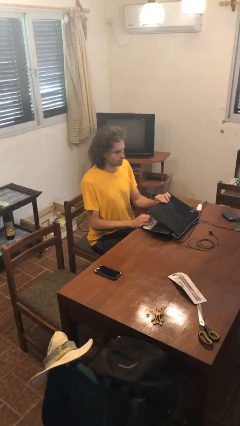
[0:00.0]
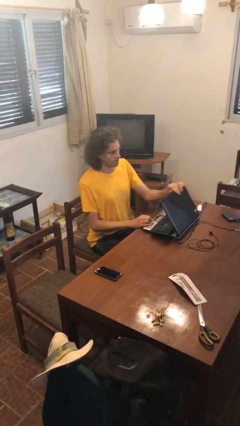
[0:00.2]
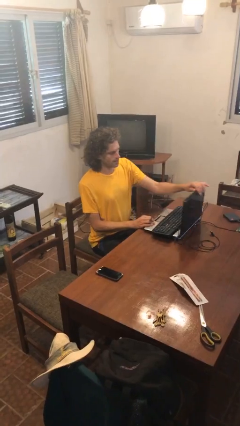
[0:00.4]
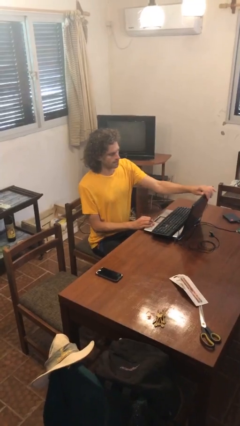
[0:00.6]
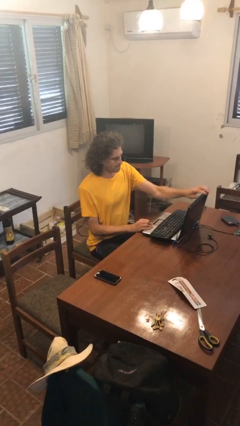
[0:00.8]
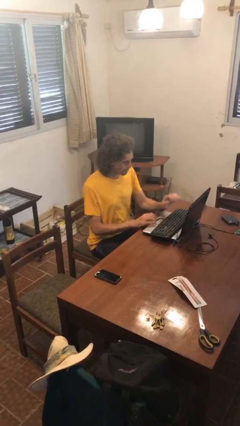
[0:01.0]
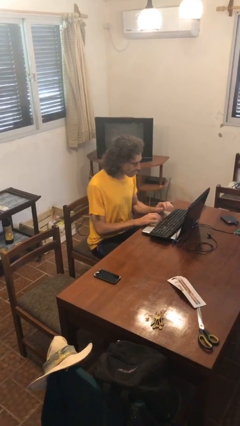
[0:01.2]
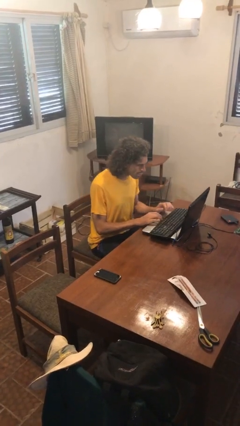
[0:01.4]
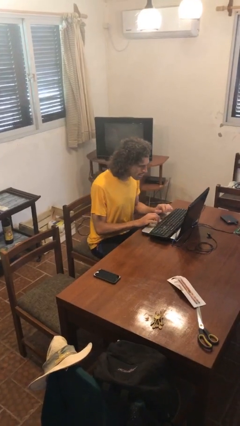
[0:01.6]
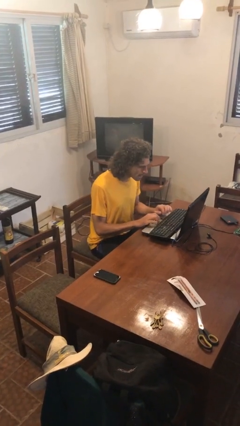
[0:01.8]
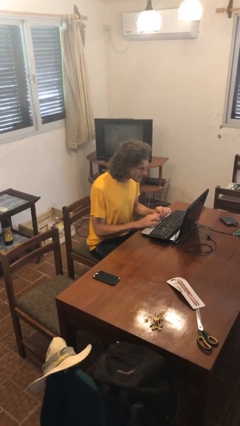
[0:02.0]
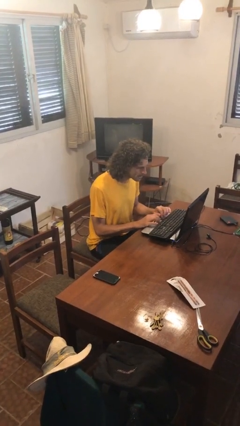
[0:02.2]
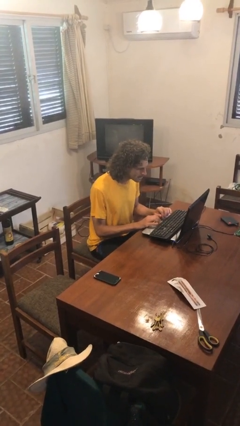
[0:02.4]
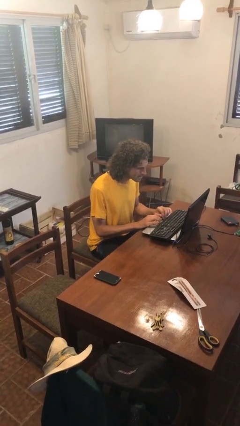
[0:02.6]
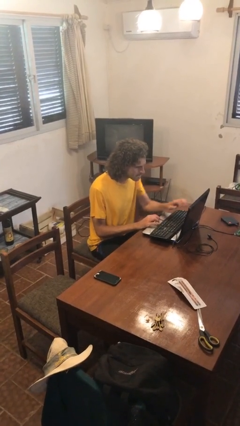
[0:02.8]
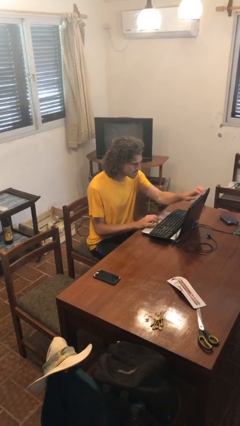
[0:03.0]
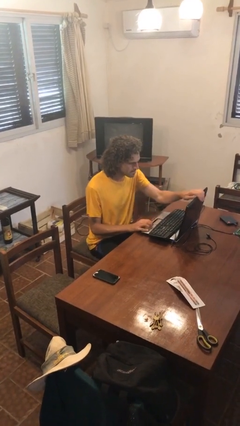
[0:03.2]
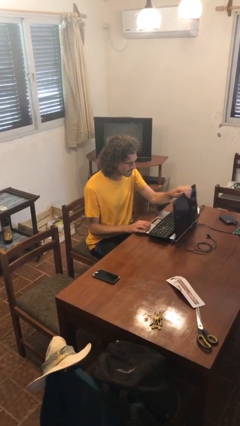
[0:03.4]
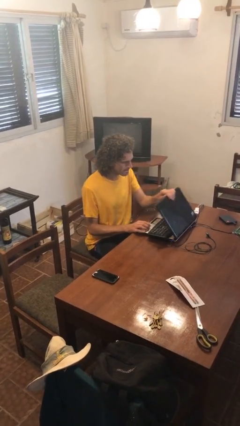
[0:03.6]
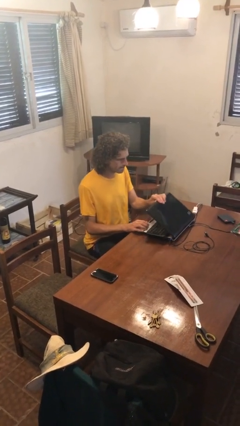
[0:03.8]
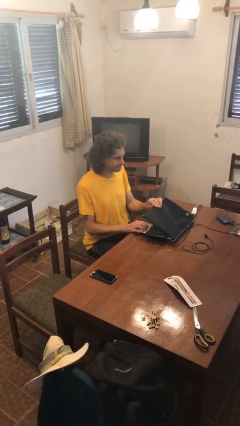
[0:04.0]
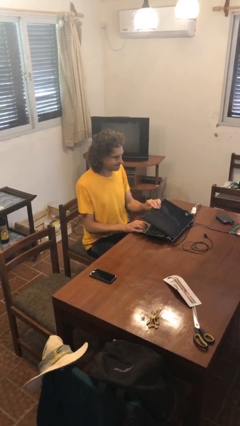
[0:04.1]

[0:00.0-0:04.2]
person interacts with laptop

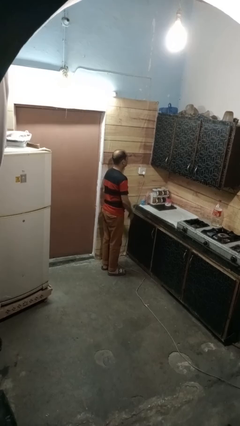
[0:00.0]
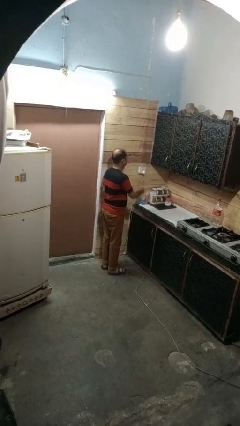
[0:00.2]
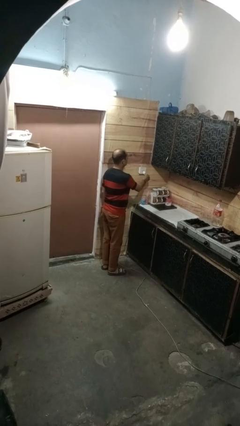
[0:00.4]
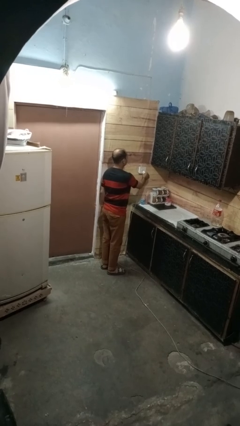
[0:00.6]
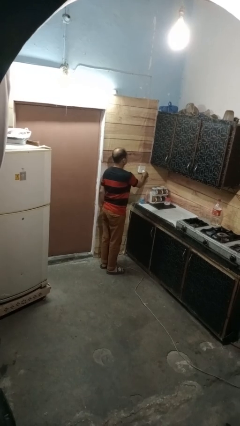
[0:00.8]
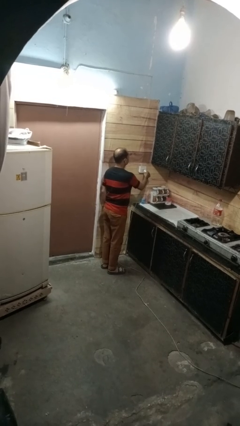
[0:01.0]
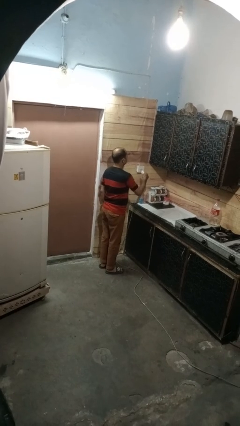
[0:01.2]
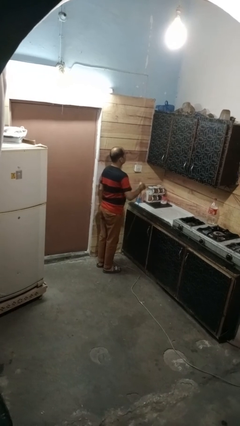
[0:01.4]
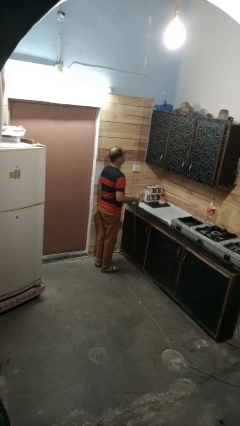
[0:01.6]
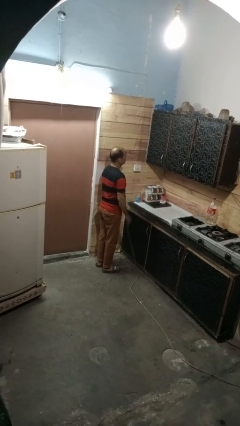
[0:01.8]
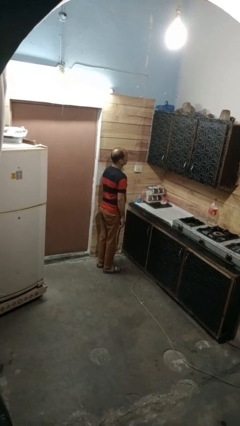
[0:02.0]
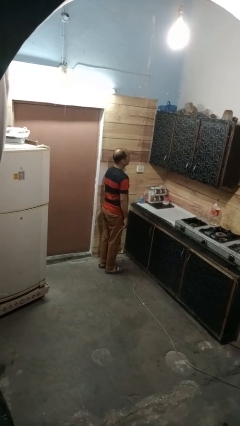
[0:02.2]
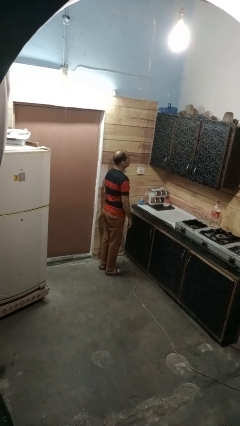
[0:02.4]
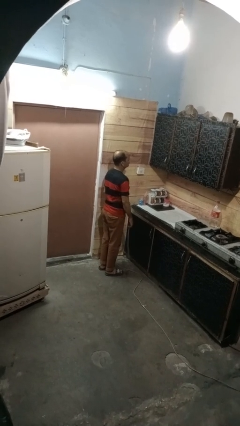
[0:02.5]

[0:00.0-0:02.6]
person unplugs from electrical socket

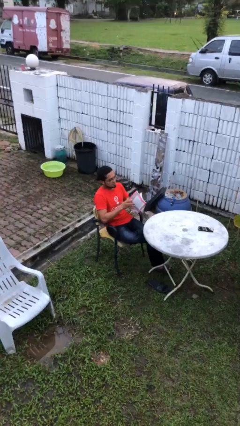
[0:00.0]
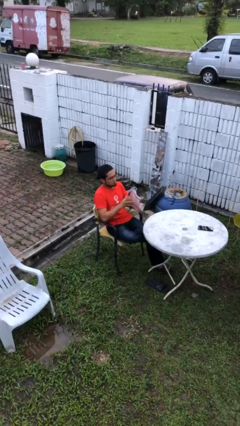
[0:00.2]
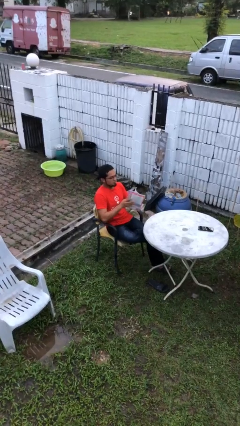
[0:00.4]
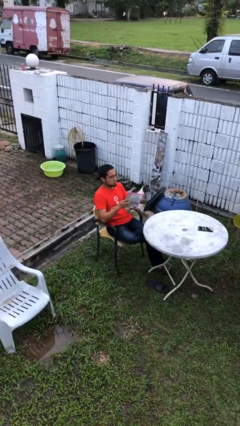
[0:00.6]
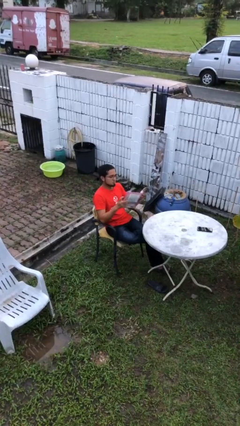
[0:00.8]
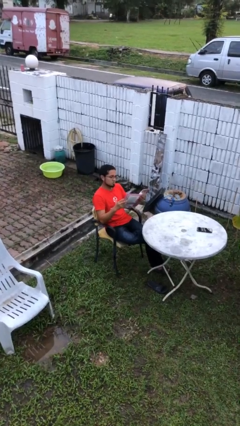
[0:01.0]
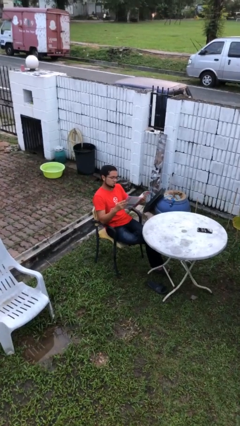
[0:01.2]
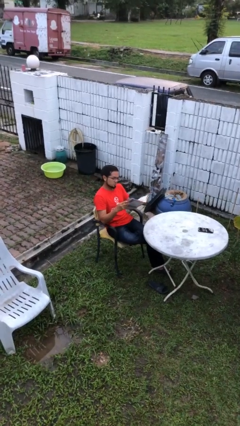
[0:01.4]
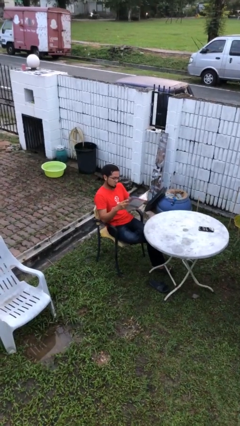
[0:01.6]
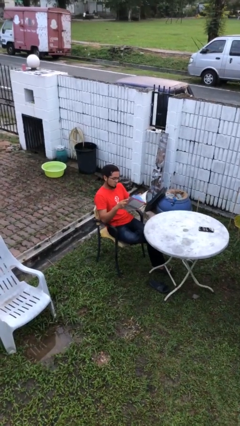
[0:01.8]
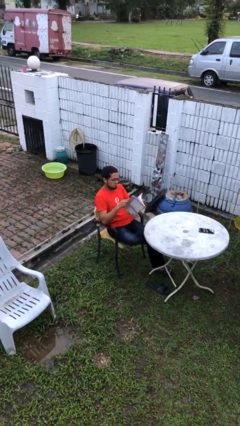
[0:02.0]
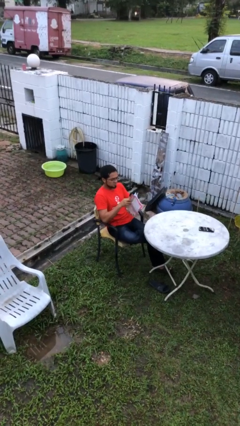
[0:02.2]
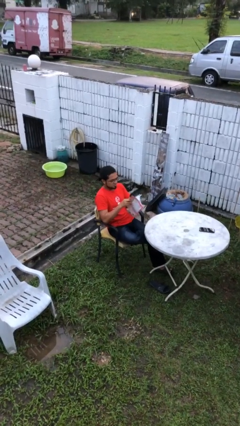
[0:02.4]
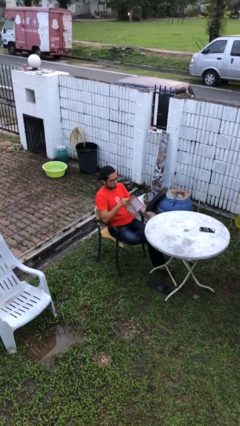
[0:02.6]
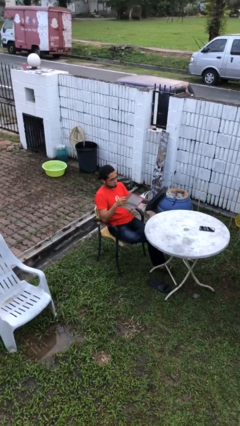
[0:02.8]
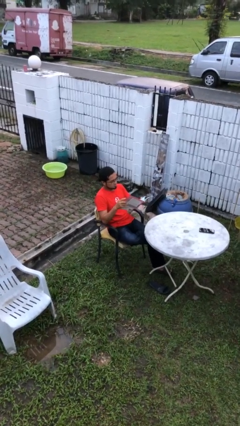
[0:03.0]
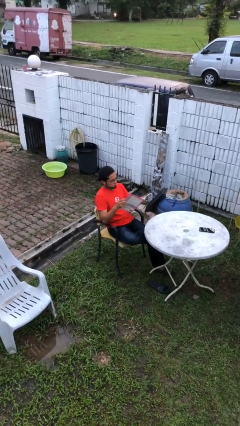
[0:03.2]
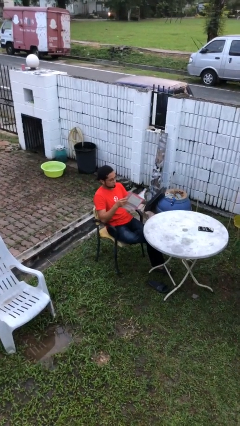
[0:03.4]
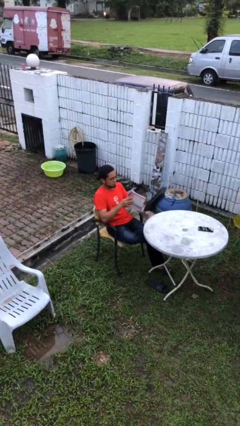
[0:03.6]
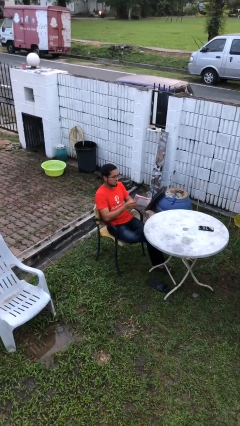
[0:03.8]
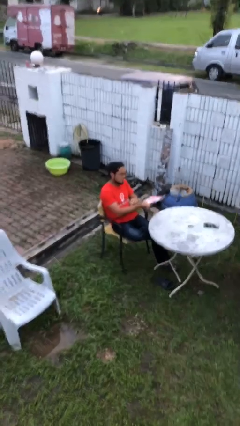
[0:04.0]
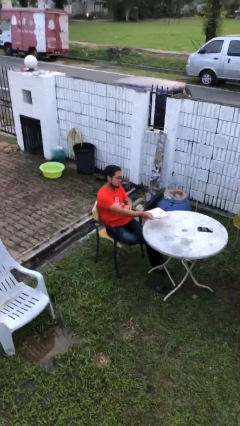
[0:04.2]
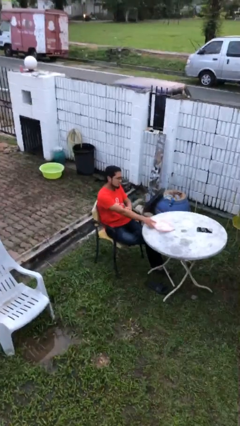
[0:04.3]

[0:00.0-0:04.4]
person reads document

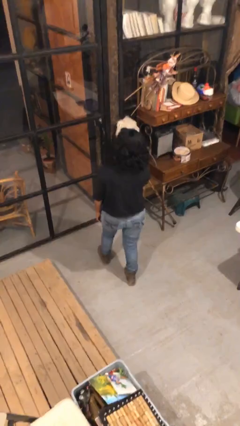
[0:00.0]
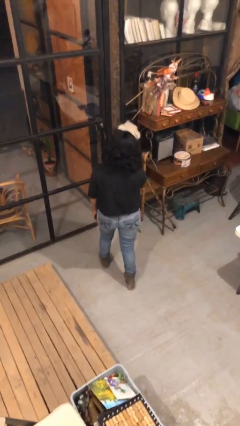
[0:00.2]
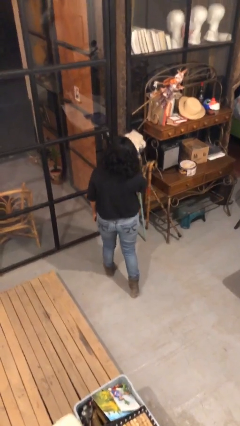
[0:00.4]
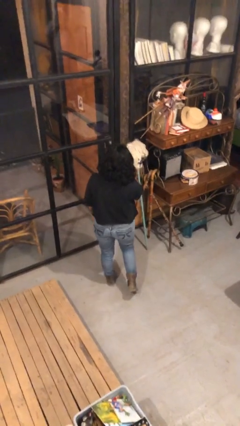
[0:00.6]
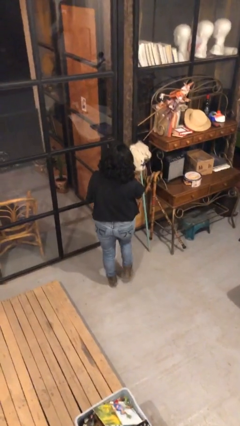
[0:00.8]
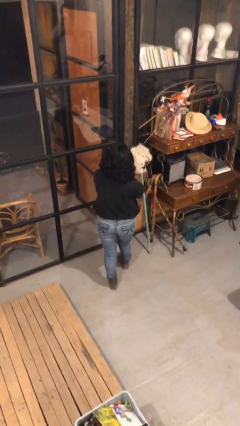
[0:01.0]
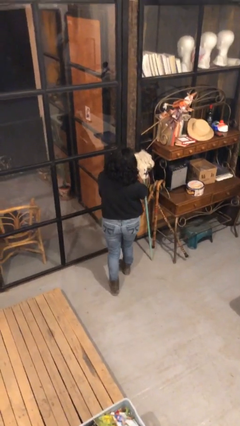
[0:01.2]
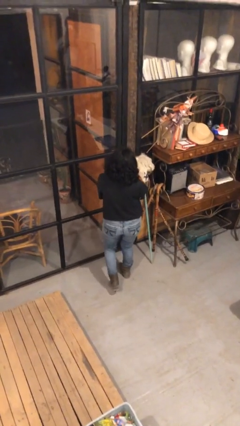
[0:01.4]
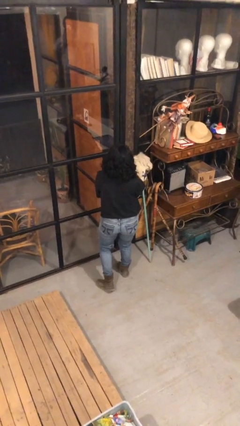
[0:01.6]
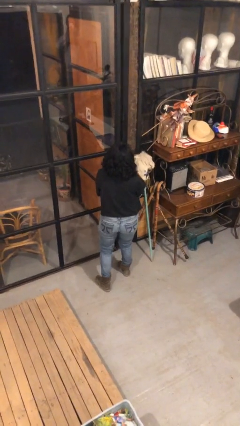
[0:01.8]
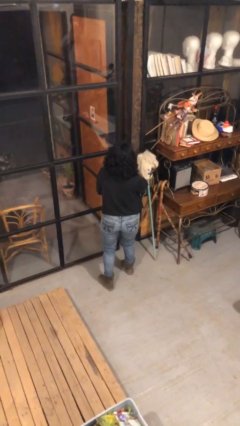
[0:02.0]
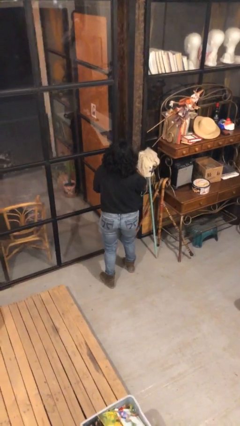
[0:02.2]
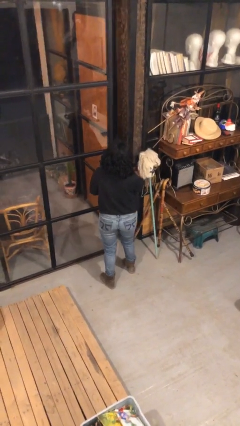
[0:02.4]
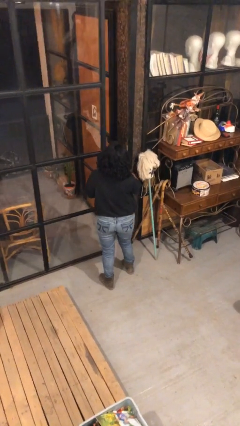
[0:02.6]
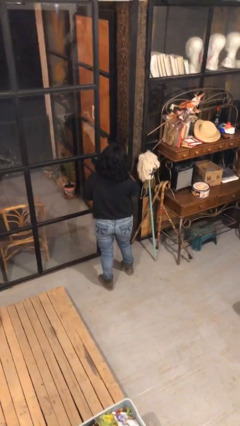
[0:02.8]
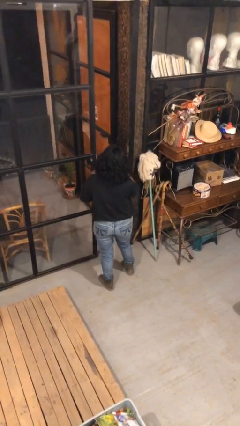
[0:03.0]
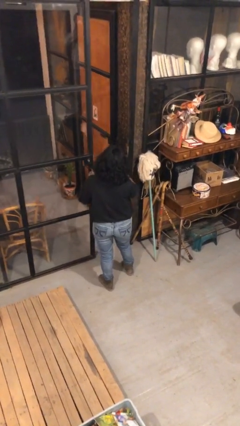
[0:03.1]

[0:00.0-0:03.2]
person opens facility door

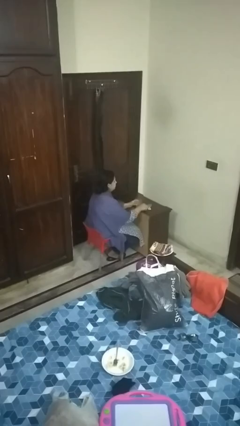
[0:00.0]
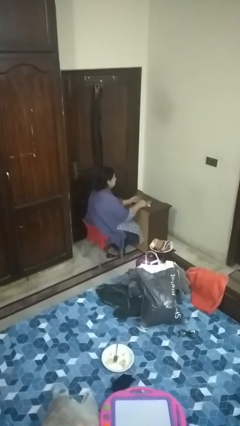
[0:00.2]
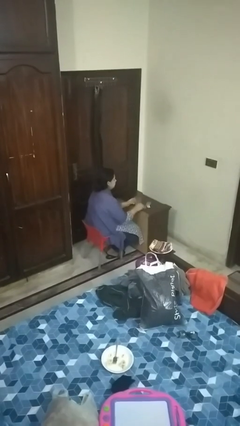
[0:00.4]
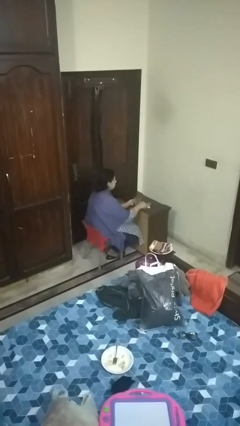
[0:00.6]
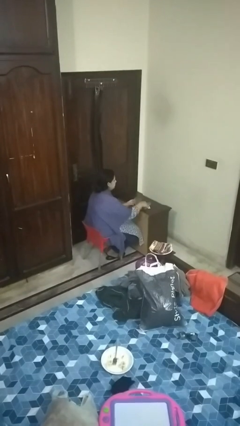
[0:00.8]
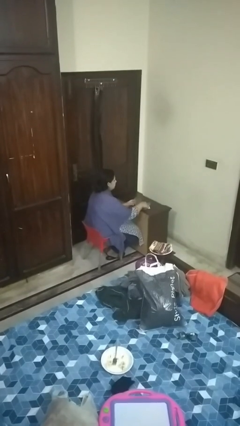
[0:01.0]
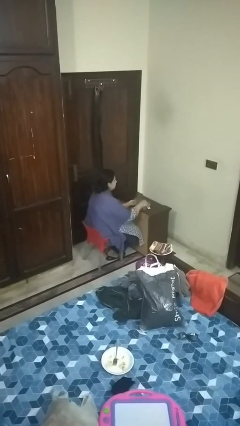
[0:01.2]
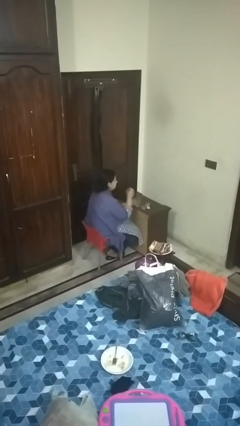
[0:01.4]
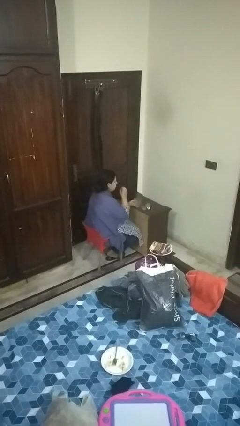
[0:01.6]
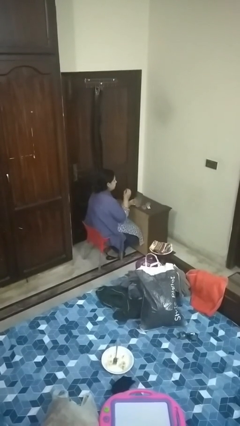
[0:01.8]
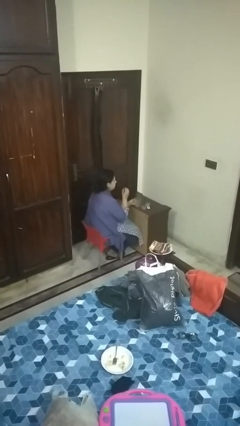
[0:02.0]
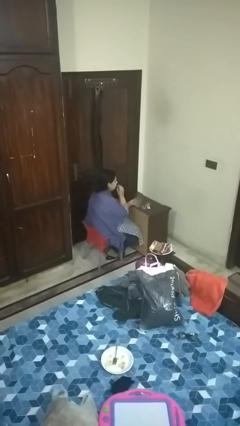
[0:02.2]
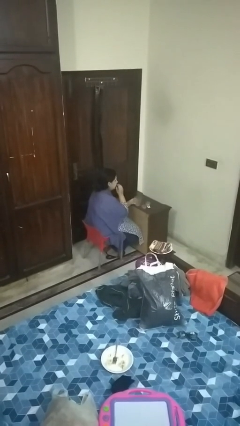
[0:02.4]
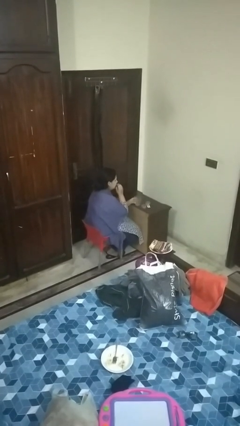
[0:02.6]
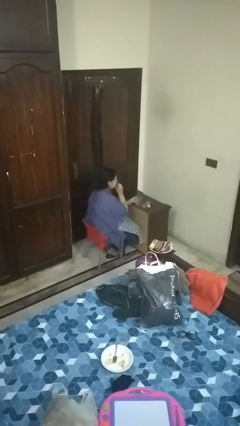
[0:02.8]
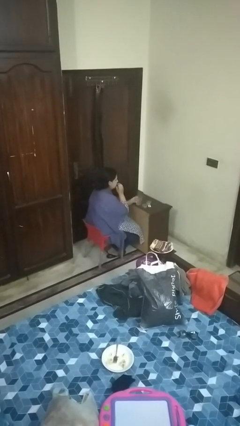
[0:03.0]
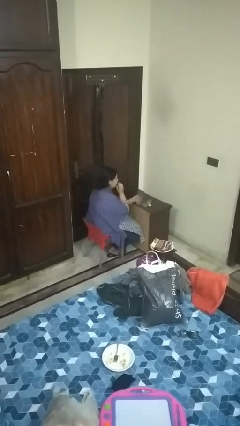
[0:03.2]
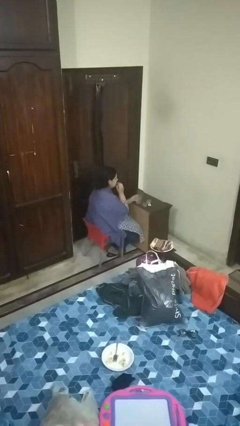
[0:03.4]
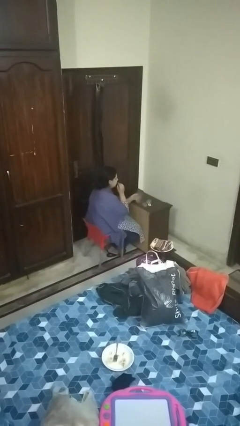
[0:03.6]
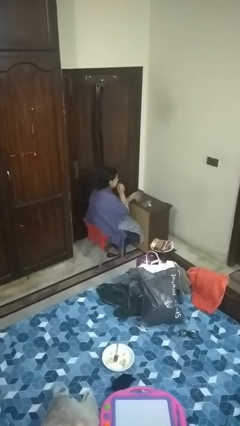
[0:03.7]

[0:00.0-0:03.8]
person takes medicine pills
